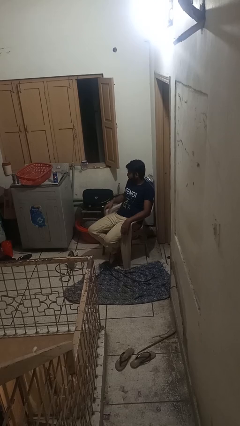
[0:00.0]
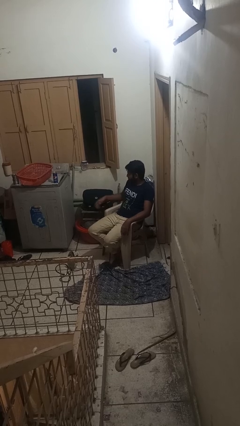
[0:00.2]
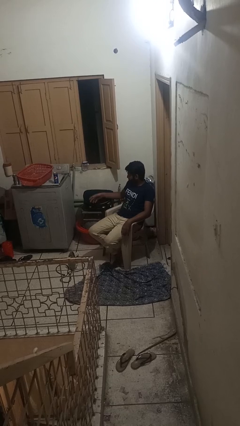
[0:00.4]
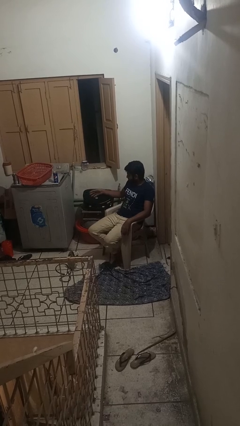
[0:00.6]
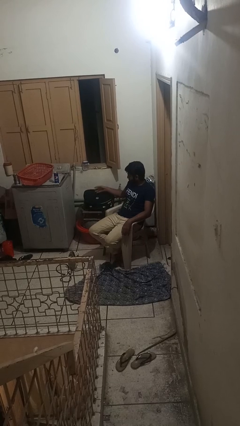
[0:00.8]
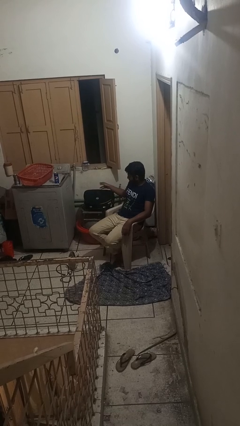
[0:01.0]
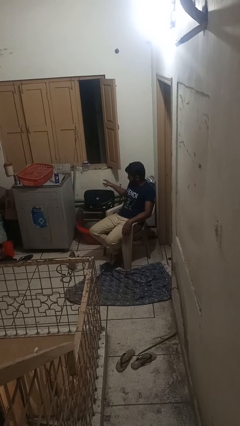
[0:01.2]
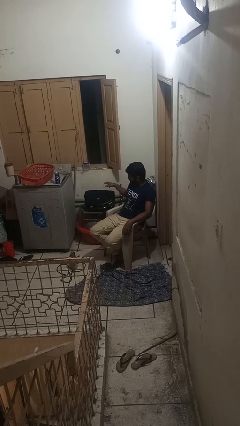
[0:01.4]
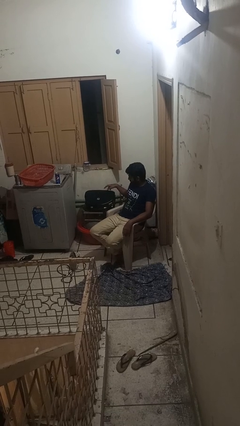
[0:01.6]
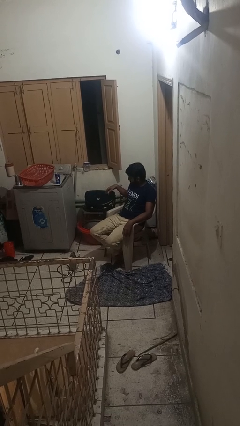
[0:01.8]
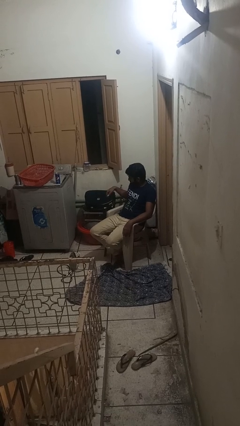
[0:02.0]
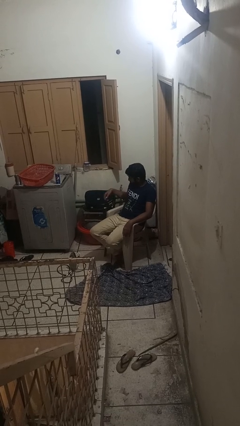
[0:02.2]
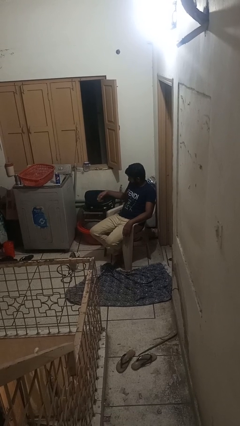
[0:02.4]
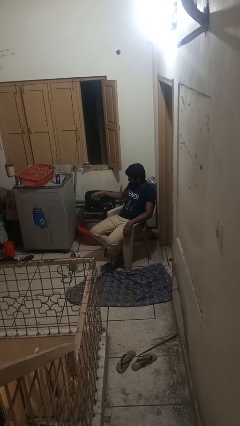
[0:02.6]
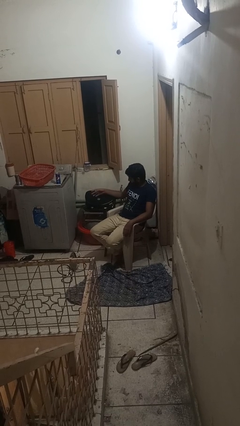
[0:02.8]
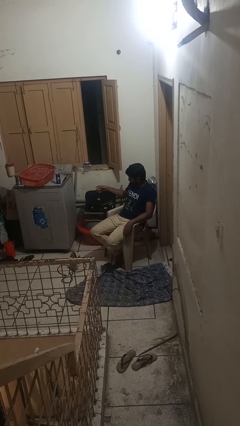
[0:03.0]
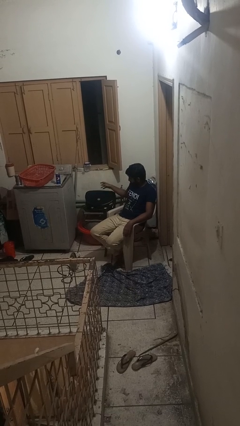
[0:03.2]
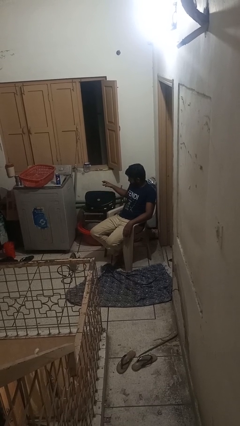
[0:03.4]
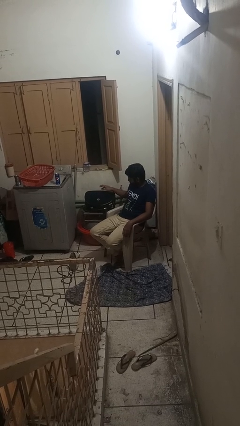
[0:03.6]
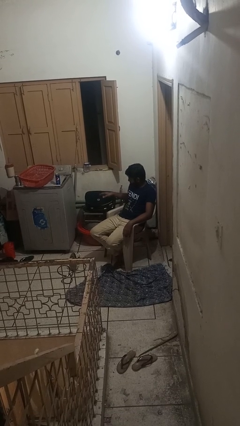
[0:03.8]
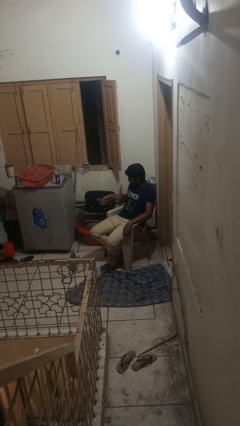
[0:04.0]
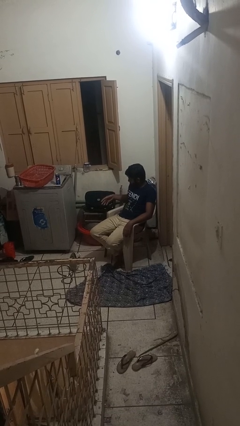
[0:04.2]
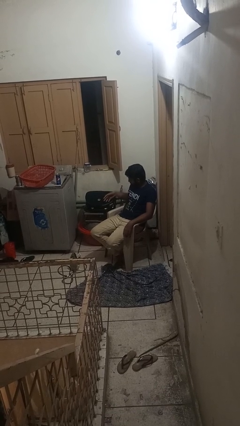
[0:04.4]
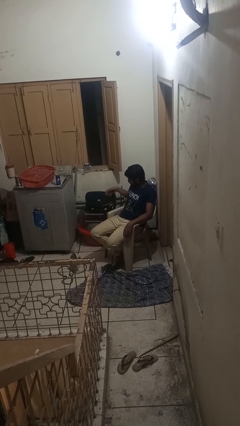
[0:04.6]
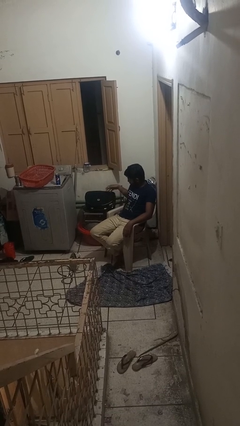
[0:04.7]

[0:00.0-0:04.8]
person waves hand over object

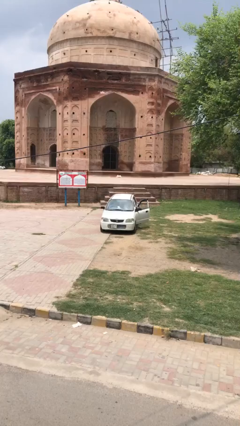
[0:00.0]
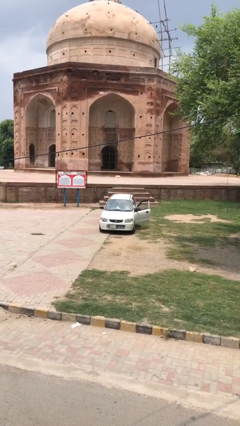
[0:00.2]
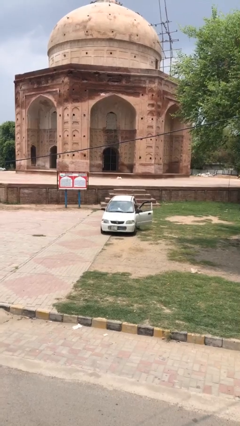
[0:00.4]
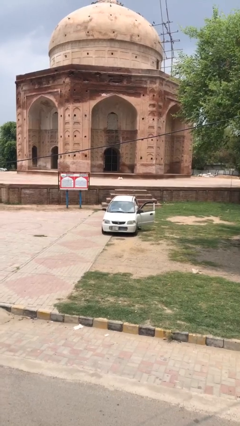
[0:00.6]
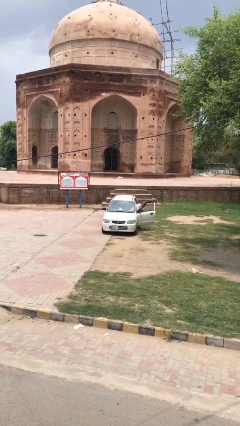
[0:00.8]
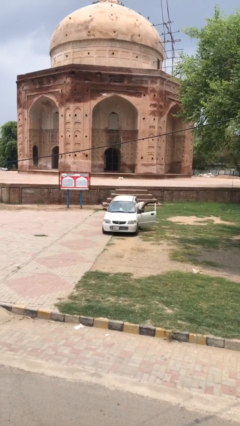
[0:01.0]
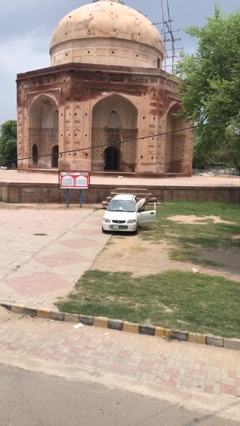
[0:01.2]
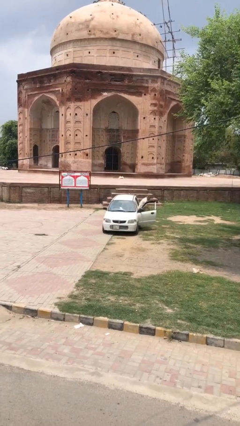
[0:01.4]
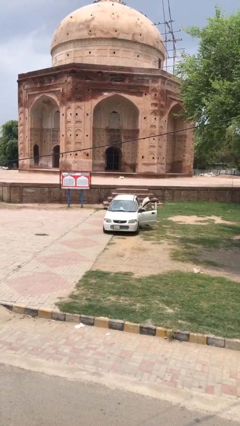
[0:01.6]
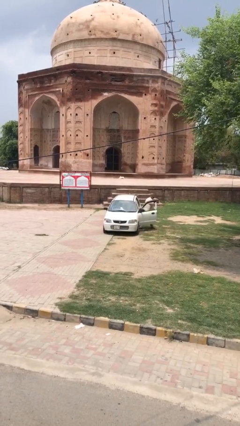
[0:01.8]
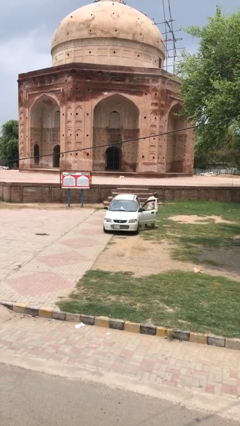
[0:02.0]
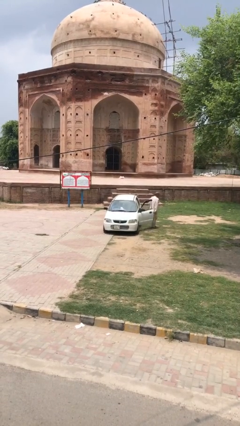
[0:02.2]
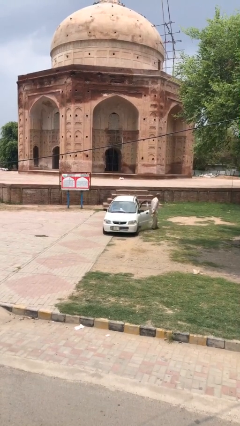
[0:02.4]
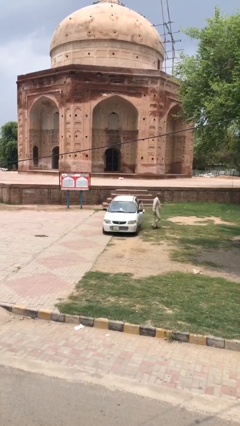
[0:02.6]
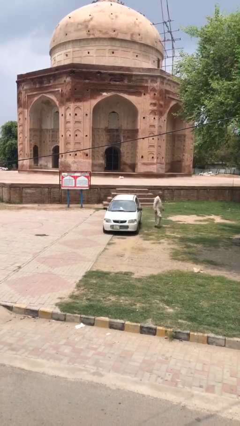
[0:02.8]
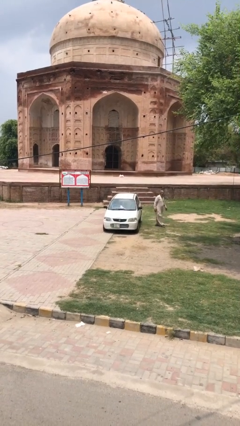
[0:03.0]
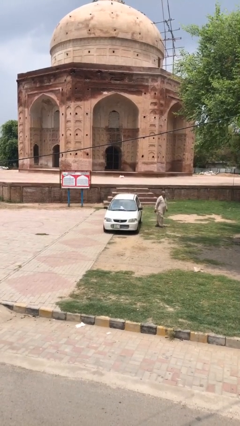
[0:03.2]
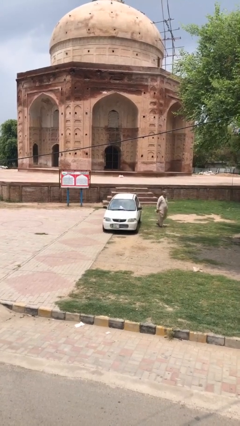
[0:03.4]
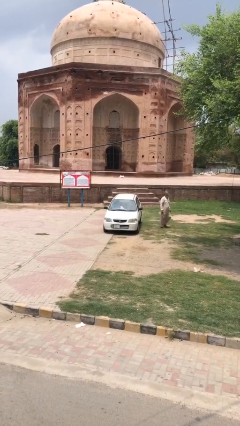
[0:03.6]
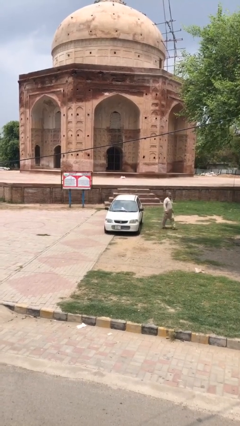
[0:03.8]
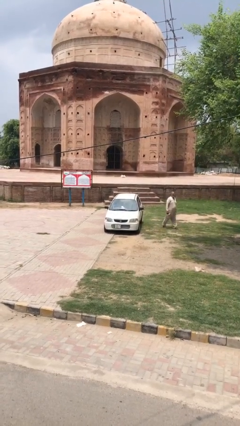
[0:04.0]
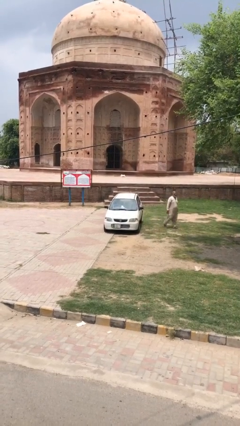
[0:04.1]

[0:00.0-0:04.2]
car drops off person

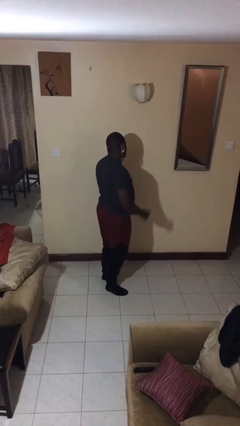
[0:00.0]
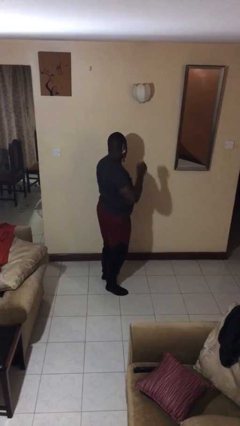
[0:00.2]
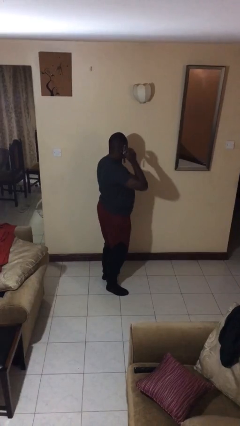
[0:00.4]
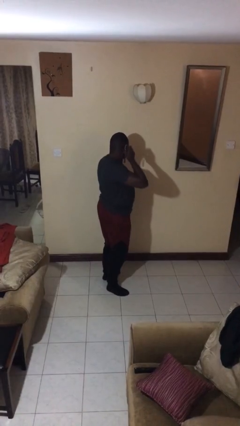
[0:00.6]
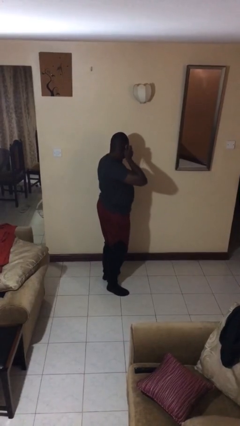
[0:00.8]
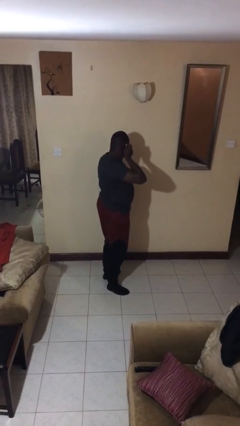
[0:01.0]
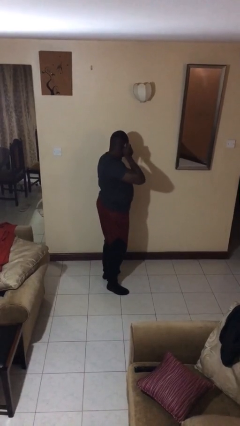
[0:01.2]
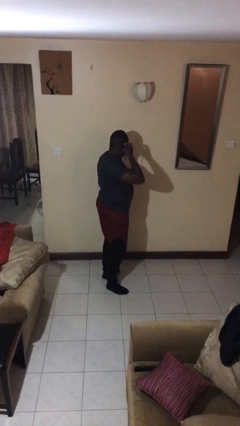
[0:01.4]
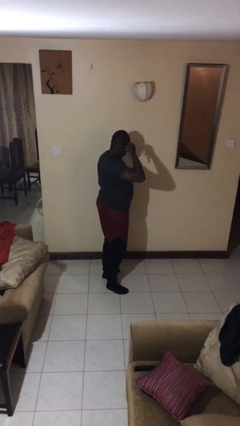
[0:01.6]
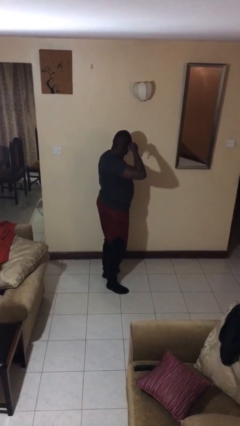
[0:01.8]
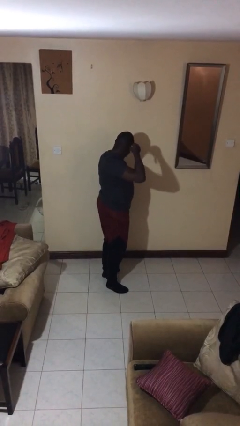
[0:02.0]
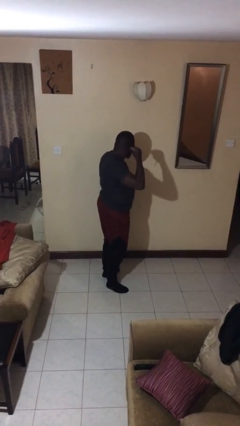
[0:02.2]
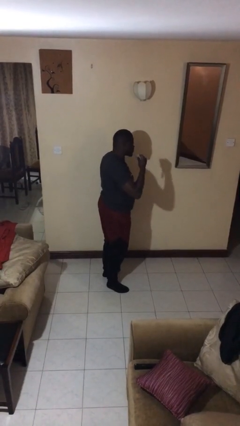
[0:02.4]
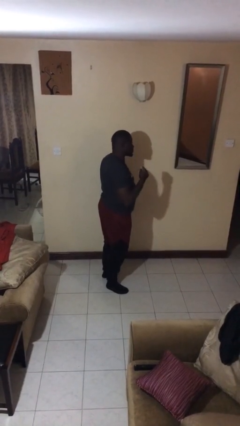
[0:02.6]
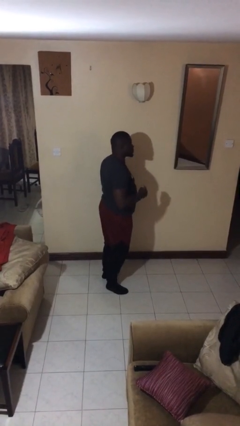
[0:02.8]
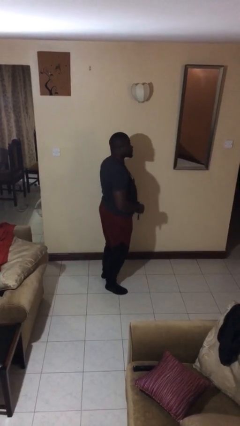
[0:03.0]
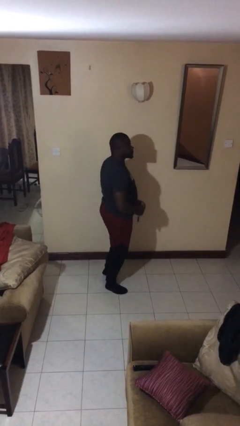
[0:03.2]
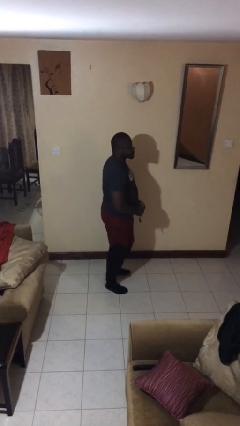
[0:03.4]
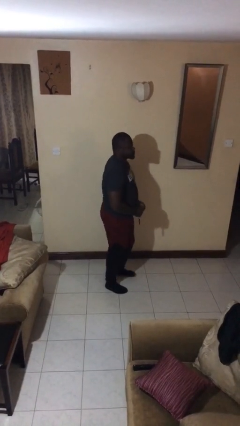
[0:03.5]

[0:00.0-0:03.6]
person takes off earrings

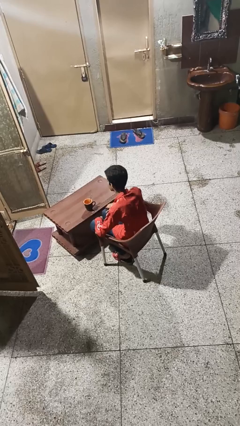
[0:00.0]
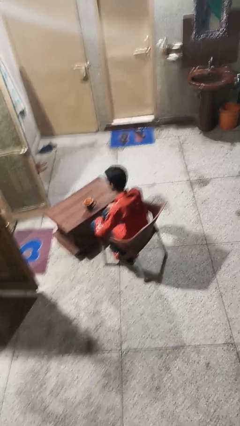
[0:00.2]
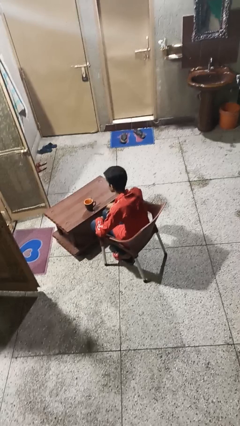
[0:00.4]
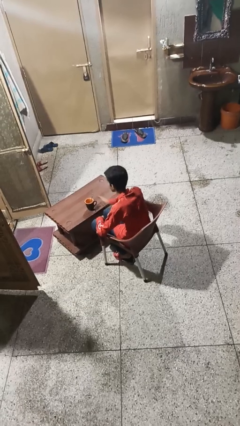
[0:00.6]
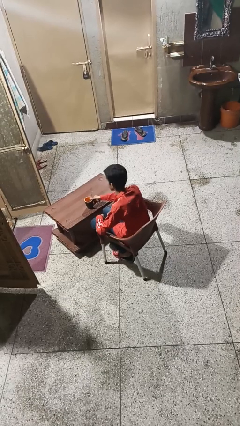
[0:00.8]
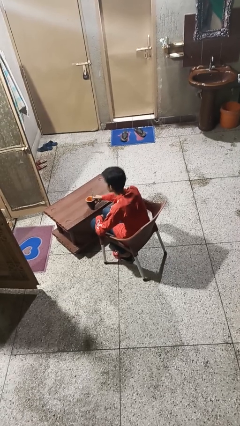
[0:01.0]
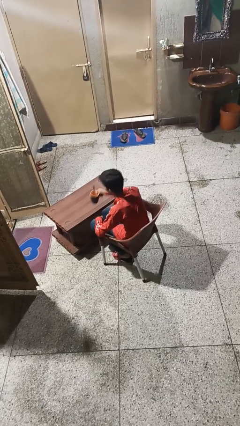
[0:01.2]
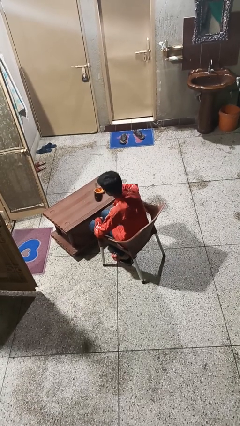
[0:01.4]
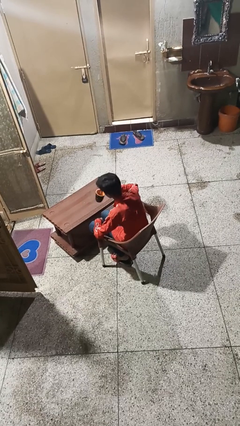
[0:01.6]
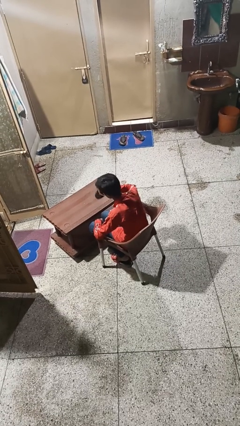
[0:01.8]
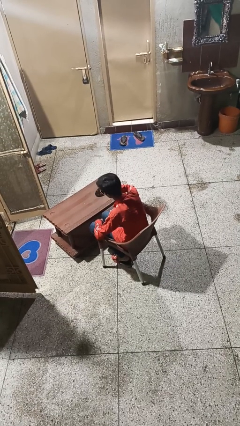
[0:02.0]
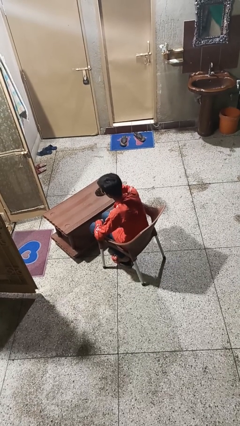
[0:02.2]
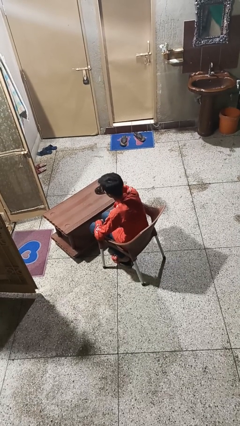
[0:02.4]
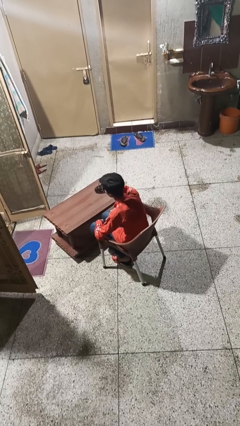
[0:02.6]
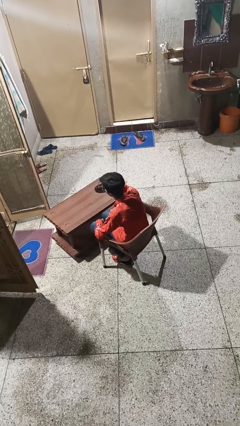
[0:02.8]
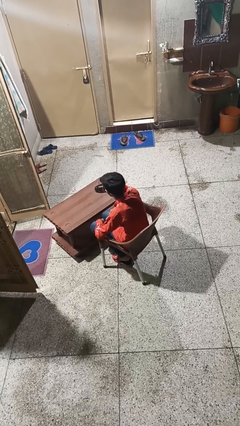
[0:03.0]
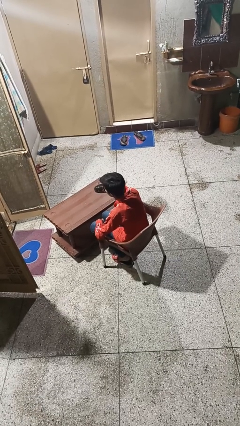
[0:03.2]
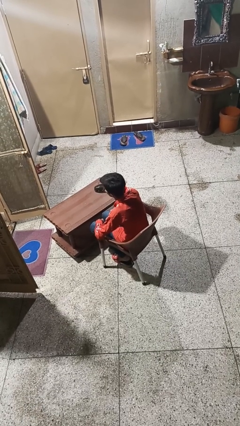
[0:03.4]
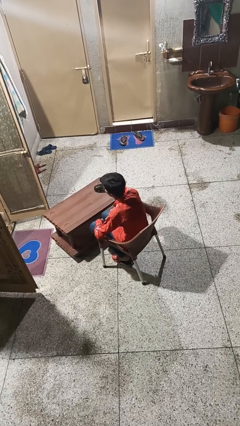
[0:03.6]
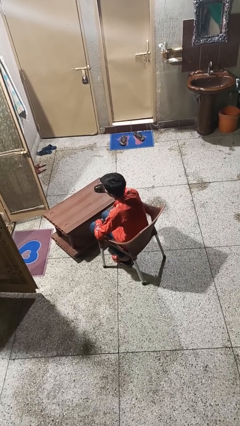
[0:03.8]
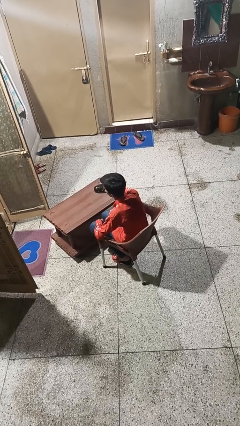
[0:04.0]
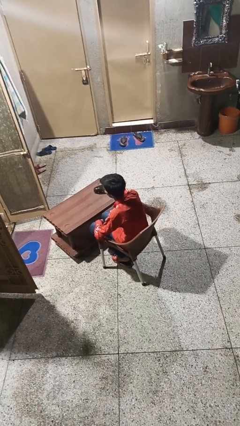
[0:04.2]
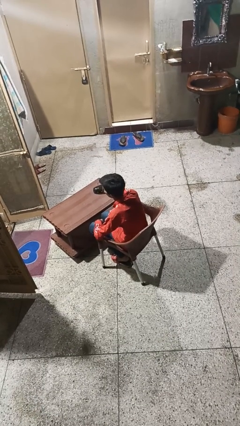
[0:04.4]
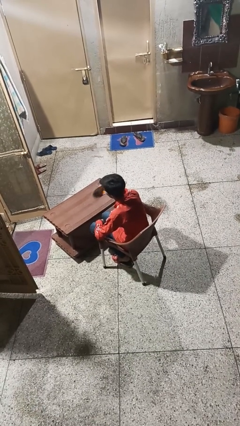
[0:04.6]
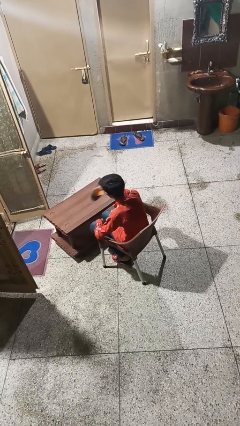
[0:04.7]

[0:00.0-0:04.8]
person drinks from mug

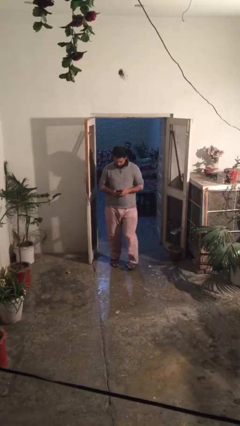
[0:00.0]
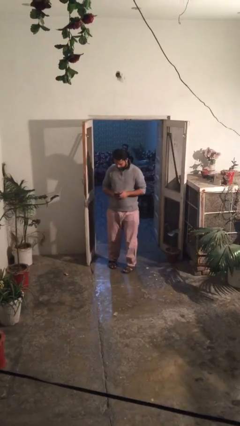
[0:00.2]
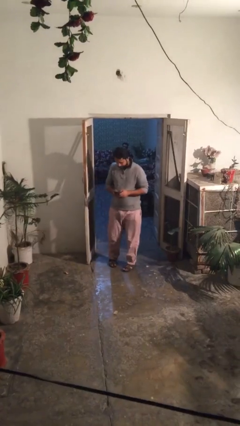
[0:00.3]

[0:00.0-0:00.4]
person enters scene through structure
